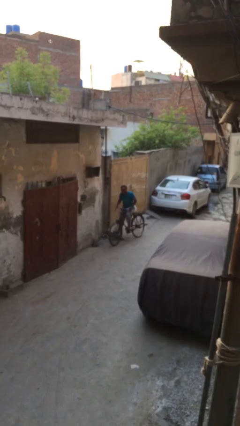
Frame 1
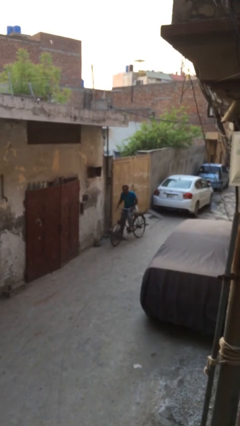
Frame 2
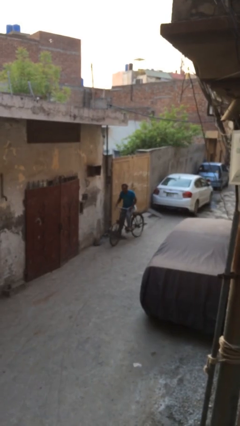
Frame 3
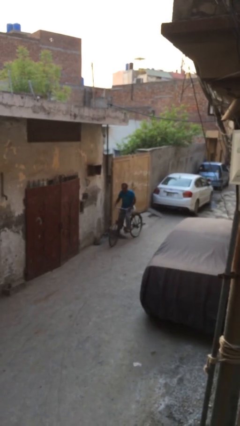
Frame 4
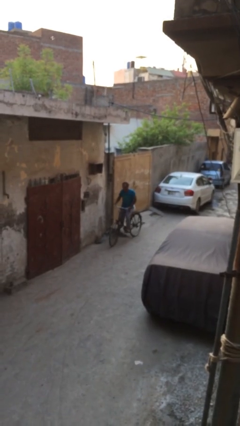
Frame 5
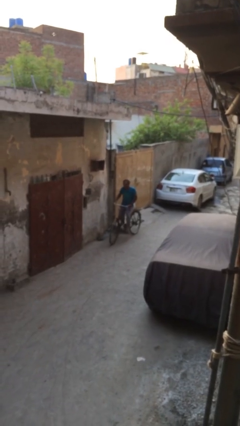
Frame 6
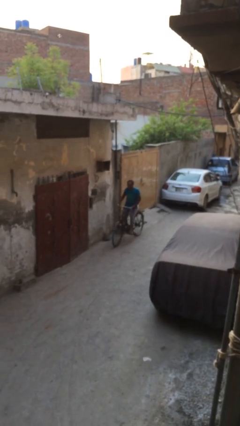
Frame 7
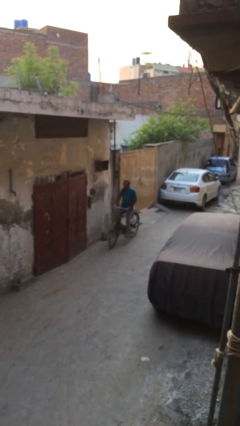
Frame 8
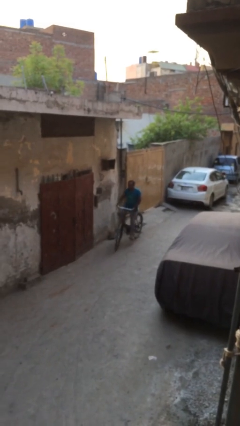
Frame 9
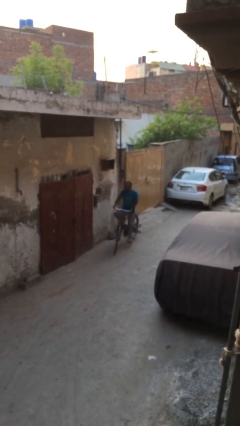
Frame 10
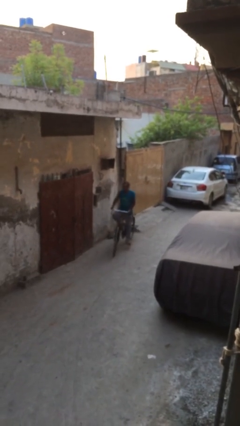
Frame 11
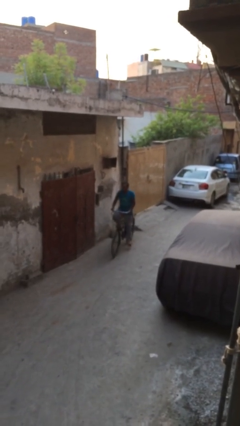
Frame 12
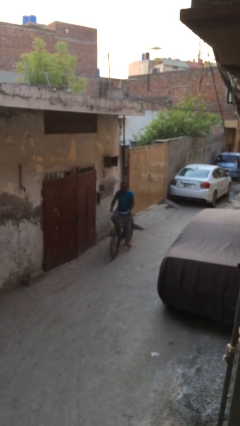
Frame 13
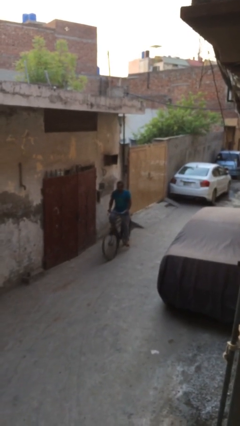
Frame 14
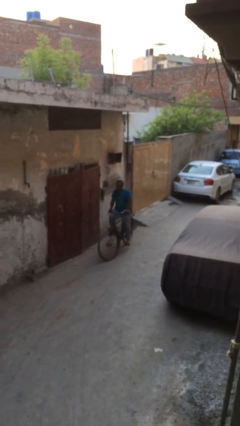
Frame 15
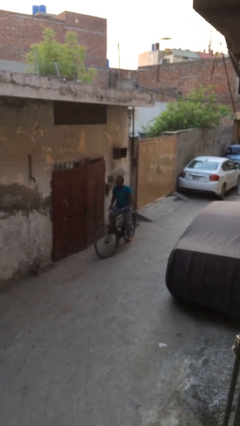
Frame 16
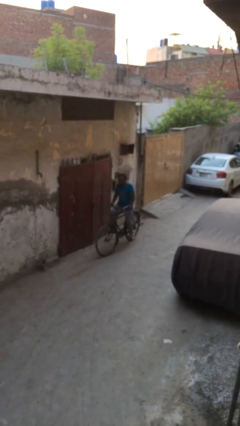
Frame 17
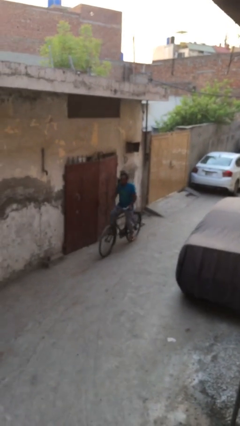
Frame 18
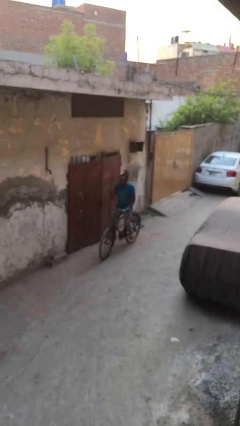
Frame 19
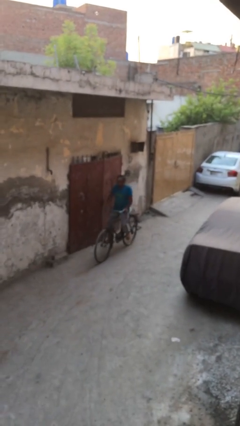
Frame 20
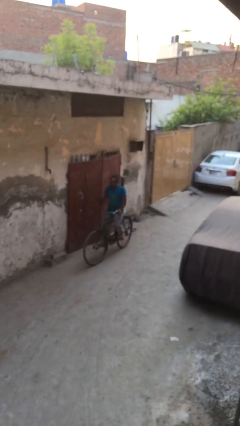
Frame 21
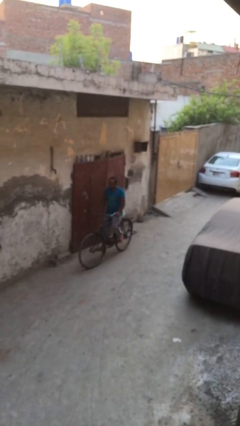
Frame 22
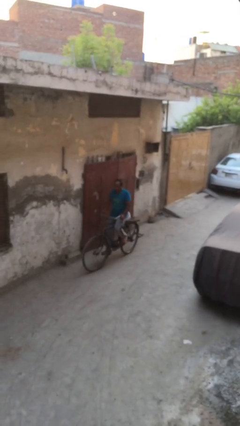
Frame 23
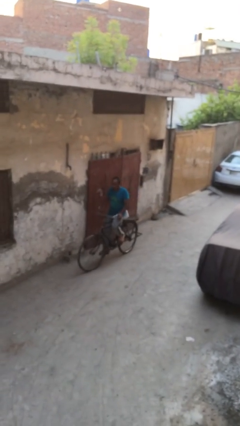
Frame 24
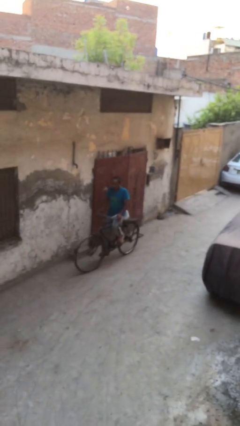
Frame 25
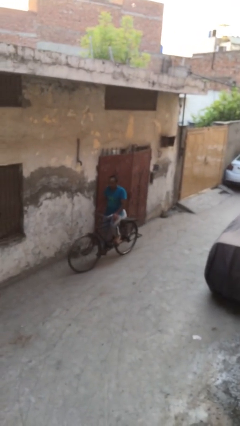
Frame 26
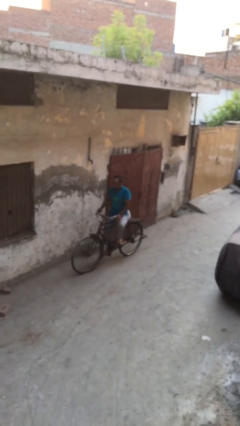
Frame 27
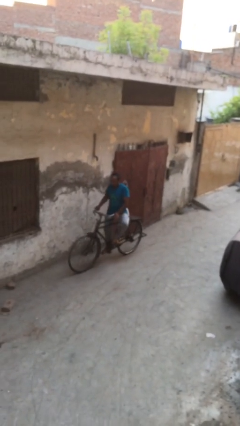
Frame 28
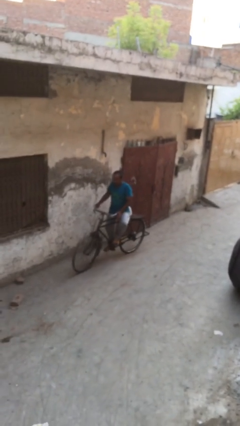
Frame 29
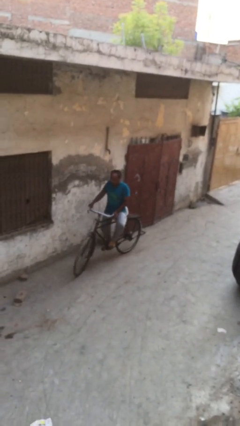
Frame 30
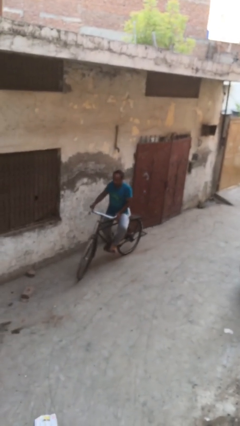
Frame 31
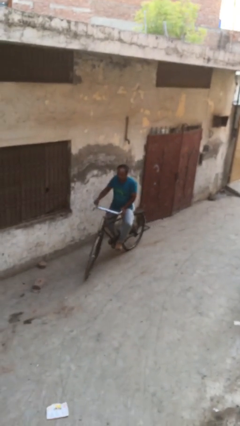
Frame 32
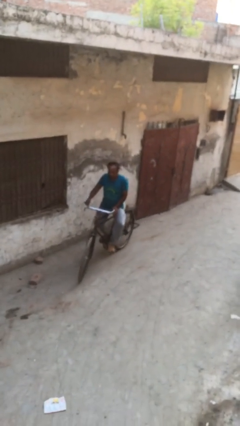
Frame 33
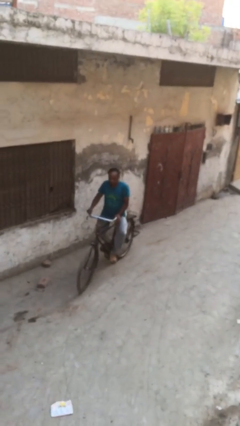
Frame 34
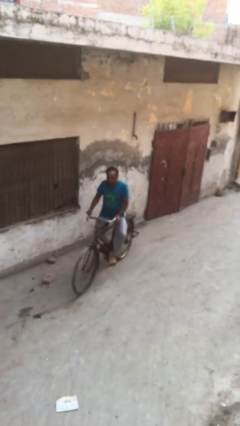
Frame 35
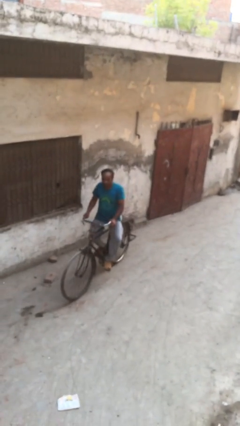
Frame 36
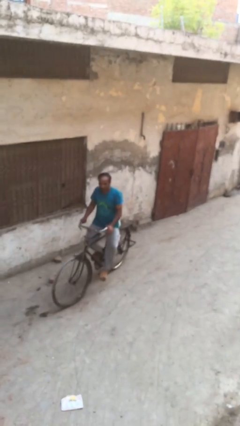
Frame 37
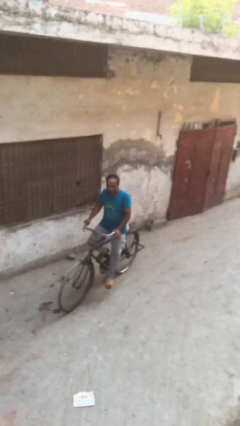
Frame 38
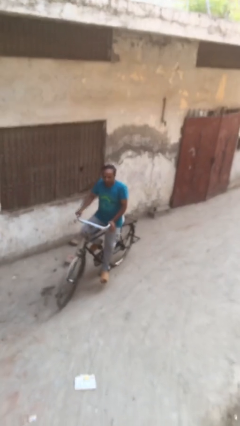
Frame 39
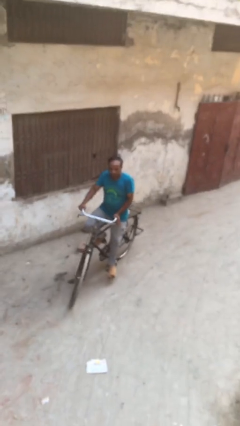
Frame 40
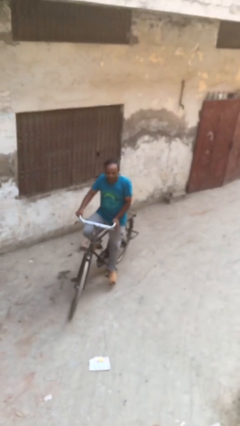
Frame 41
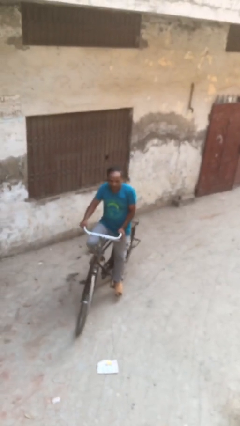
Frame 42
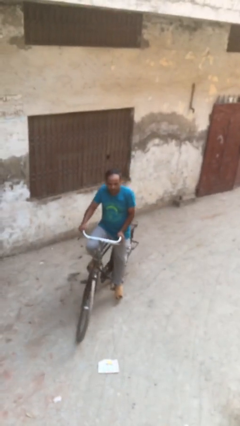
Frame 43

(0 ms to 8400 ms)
person rides bicycle

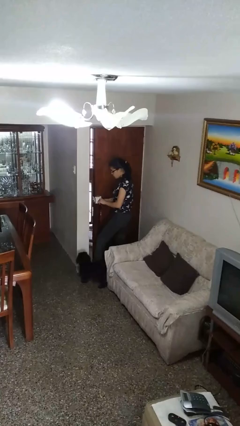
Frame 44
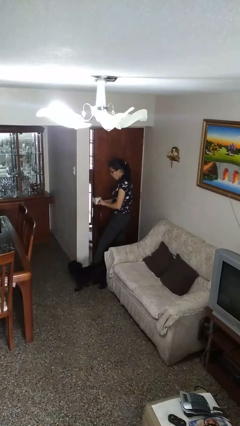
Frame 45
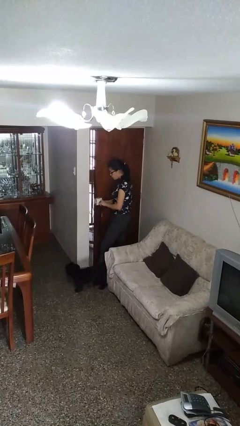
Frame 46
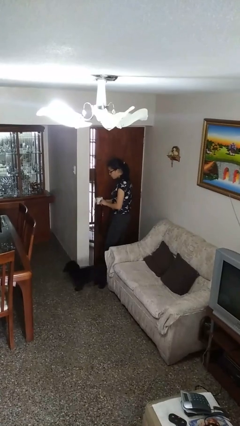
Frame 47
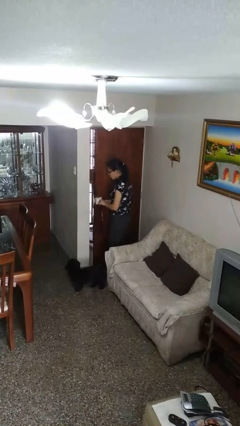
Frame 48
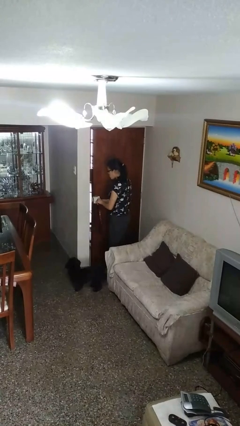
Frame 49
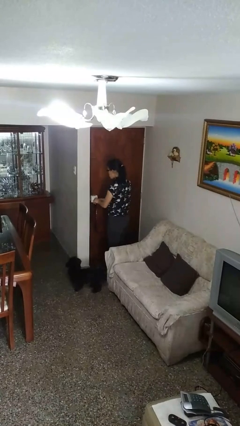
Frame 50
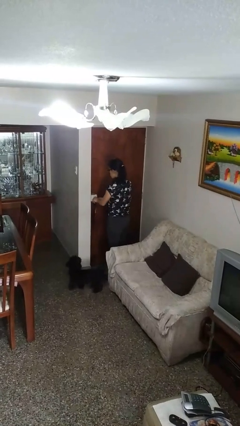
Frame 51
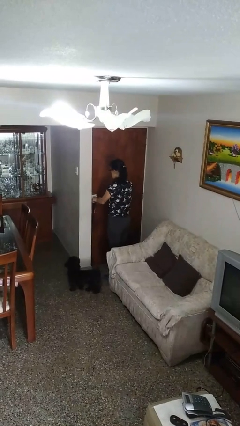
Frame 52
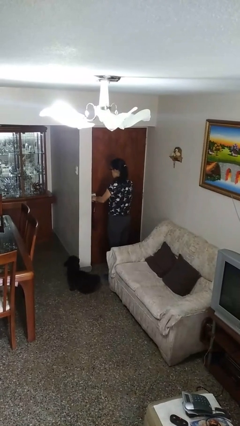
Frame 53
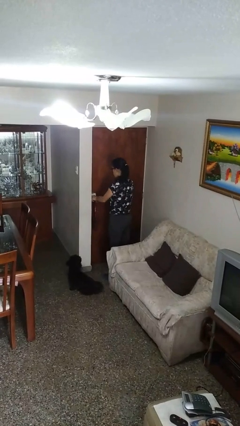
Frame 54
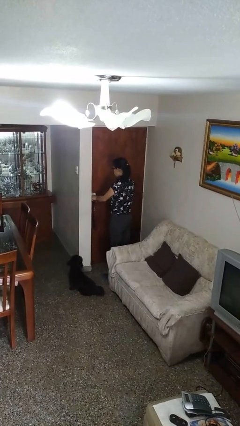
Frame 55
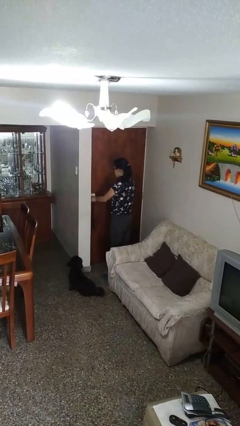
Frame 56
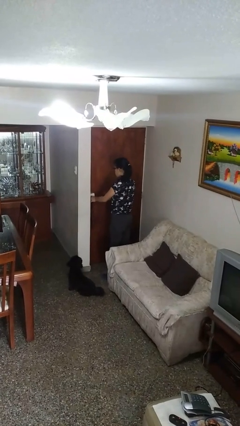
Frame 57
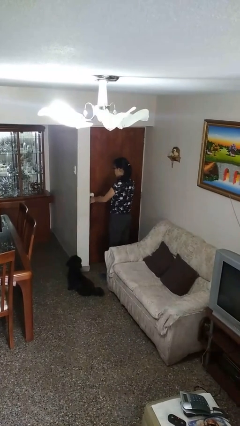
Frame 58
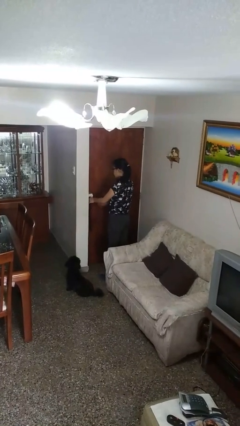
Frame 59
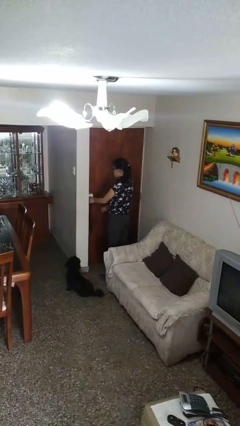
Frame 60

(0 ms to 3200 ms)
person closes facility door

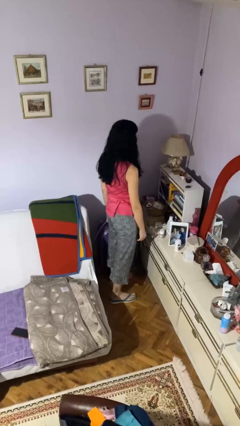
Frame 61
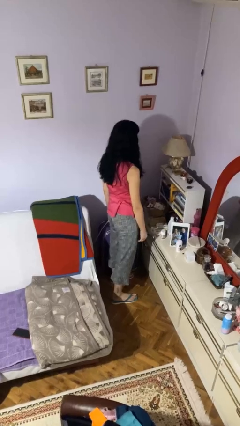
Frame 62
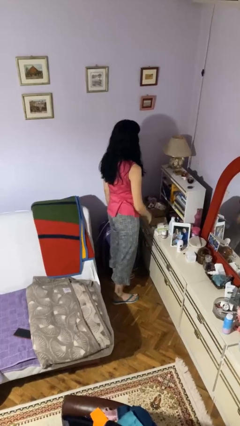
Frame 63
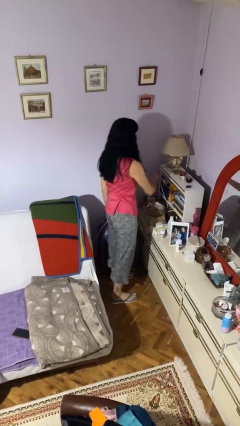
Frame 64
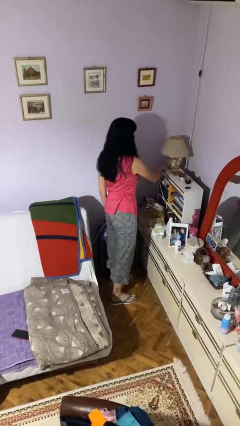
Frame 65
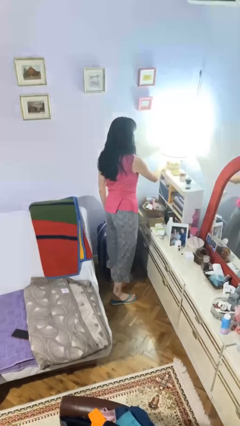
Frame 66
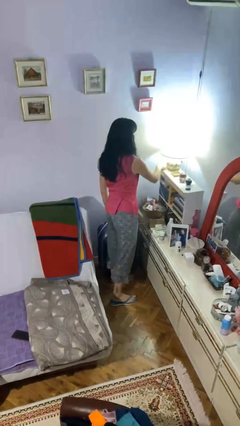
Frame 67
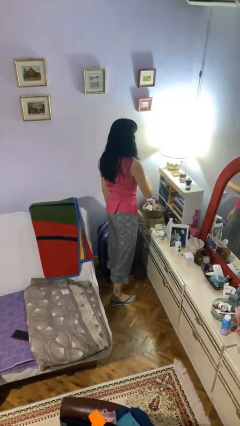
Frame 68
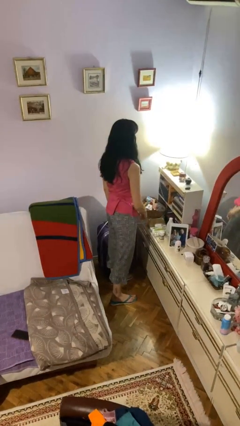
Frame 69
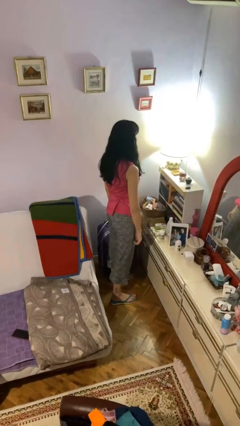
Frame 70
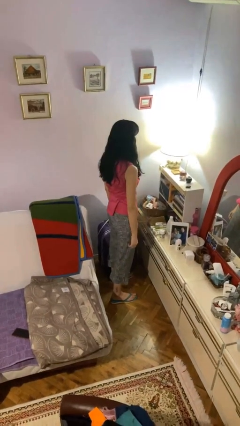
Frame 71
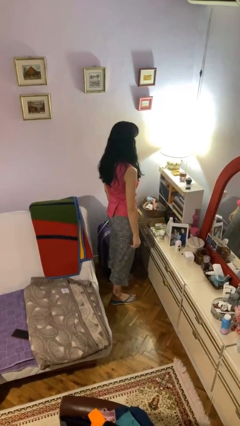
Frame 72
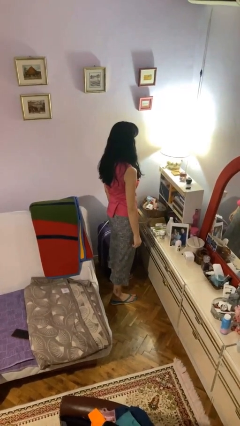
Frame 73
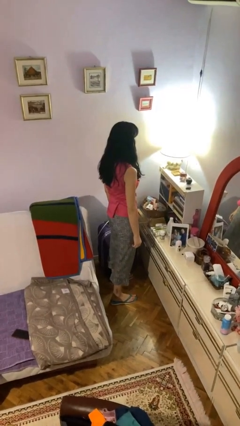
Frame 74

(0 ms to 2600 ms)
person turns on lamp

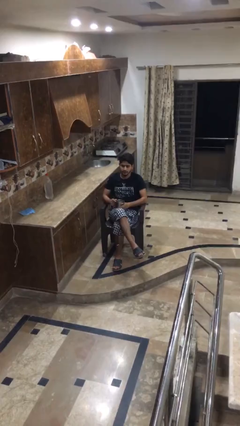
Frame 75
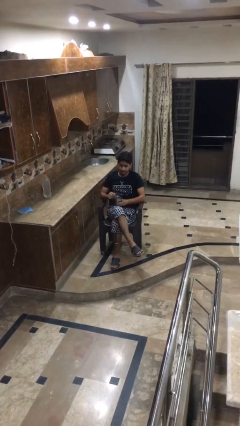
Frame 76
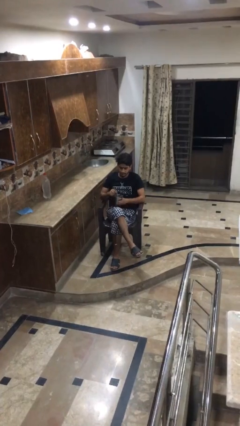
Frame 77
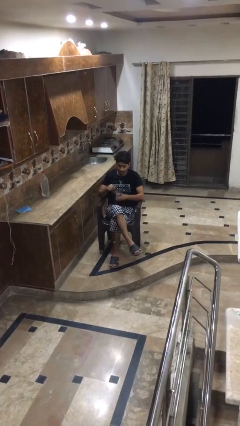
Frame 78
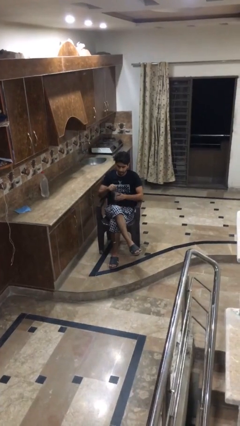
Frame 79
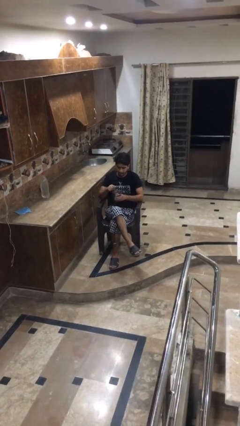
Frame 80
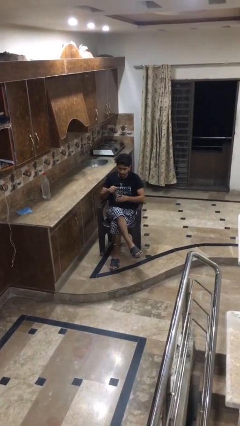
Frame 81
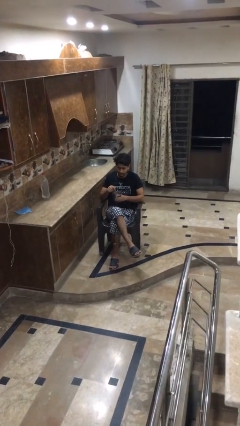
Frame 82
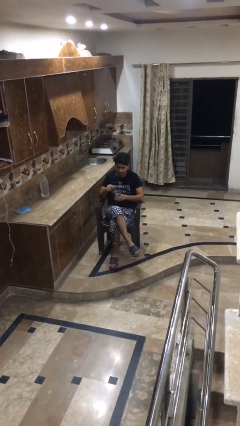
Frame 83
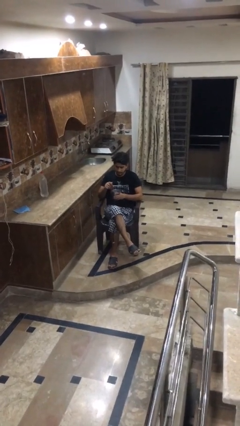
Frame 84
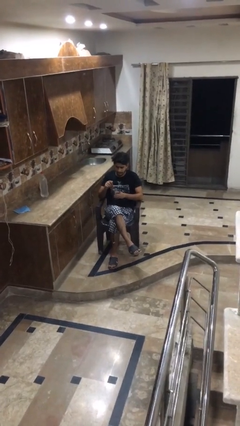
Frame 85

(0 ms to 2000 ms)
person stirs mug

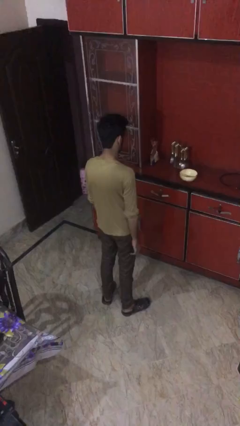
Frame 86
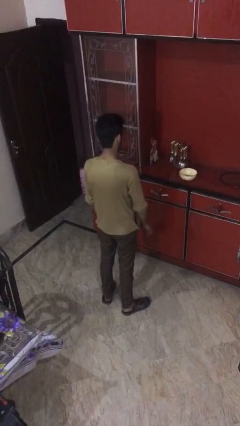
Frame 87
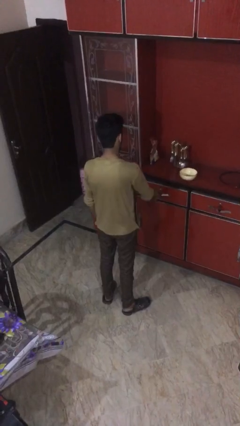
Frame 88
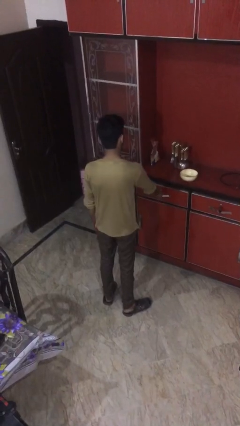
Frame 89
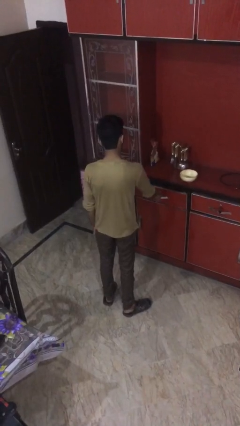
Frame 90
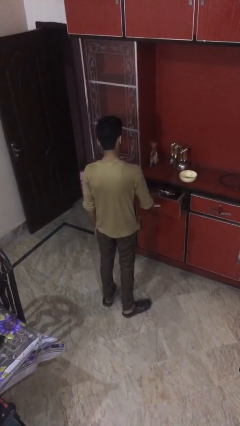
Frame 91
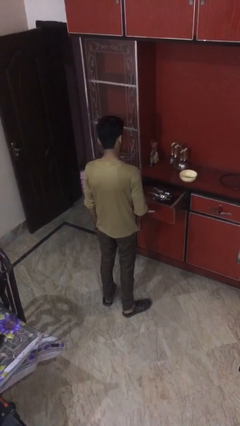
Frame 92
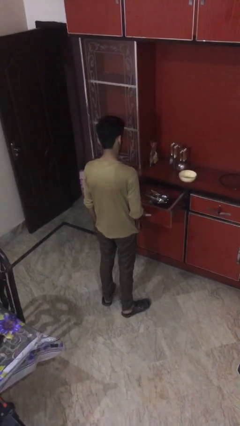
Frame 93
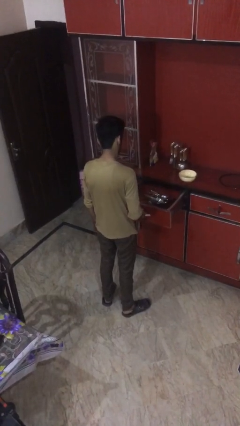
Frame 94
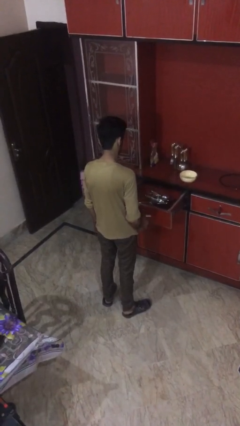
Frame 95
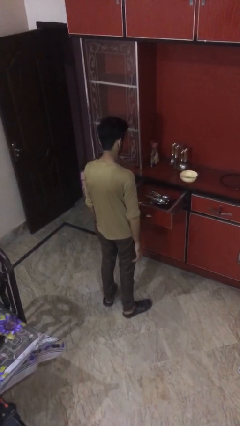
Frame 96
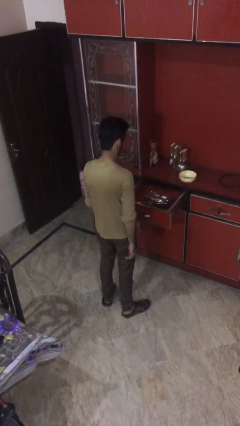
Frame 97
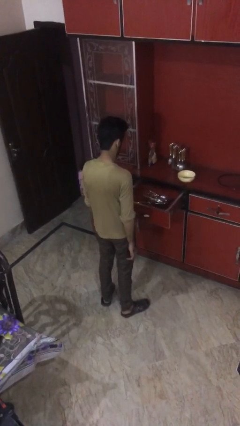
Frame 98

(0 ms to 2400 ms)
person opens kitchen drawer
